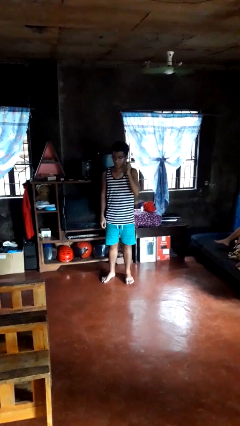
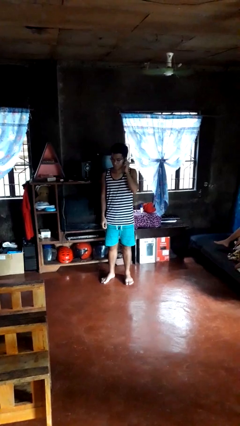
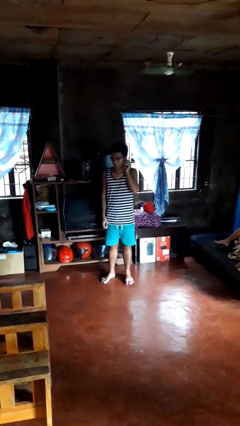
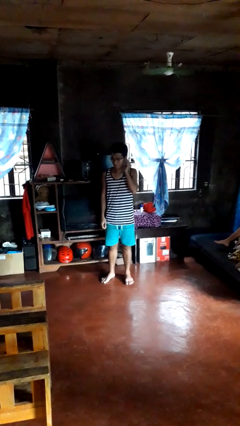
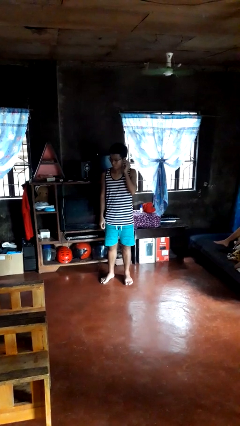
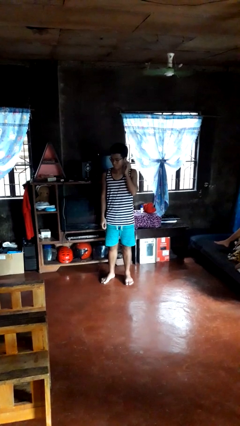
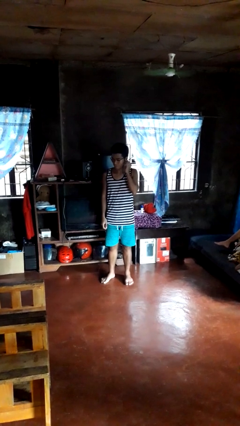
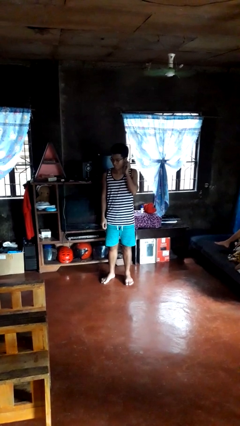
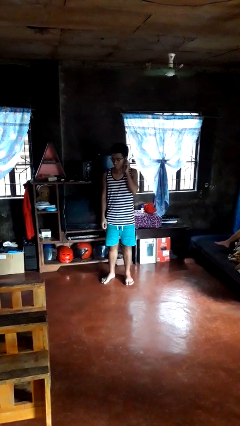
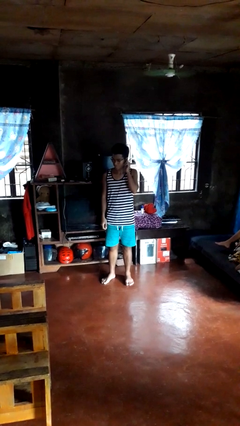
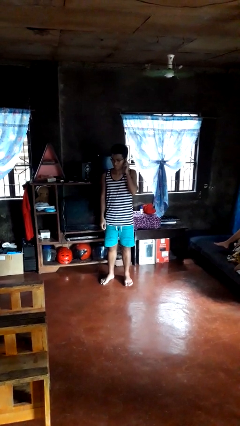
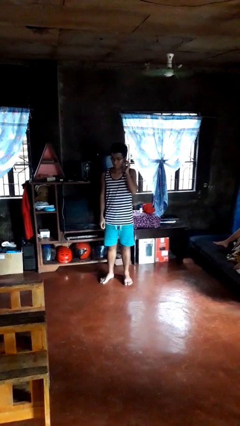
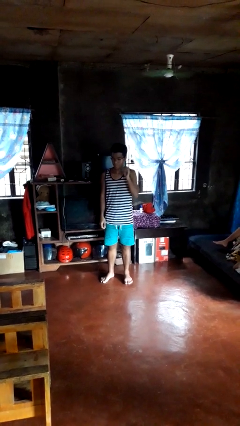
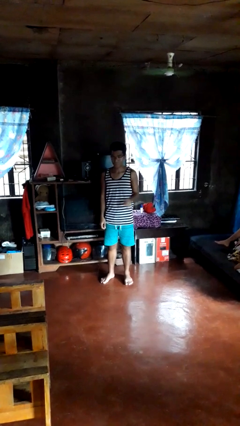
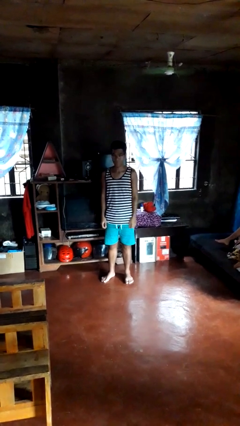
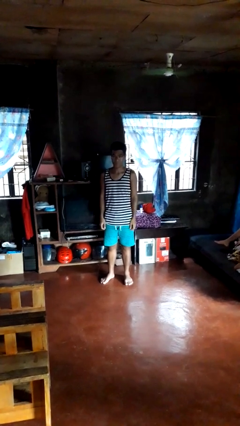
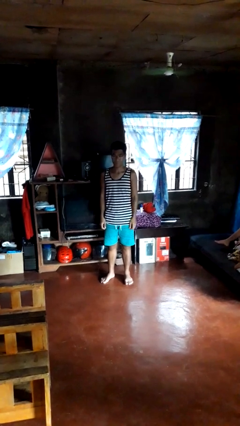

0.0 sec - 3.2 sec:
person touches earlobe

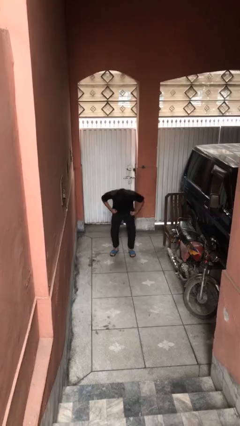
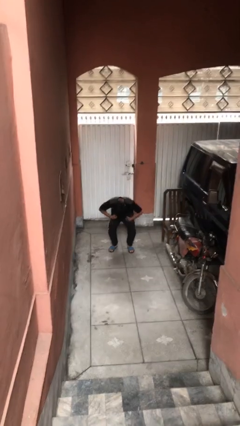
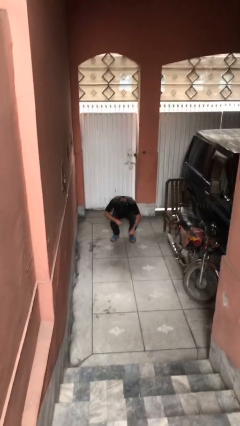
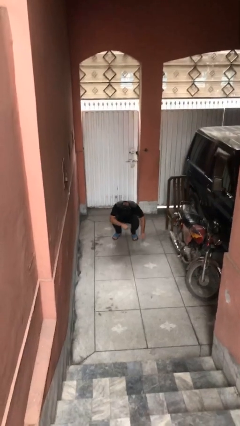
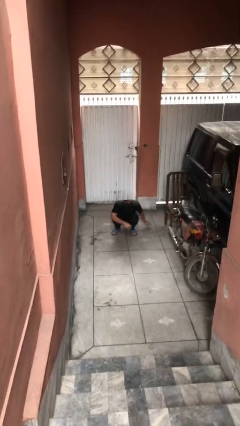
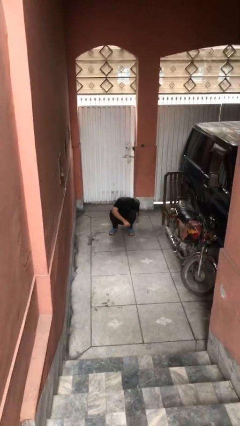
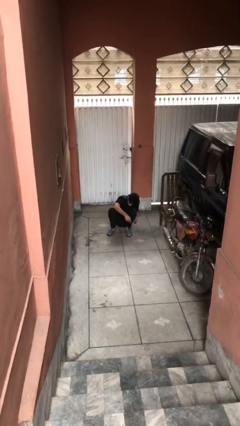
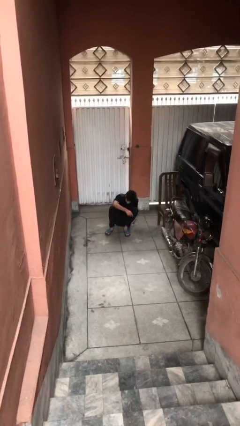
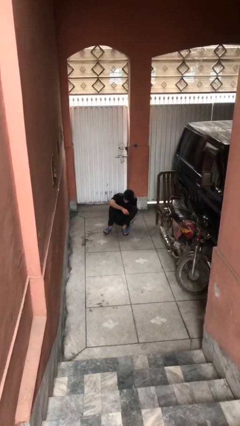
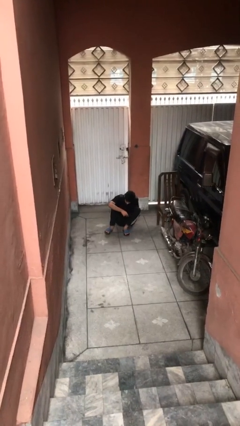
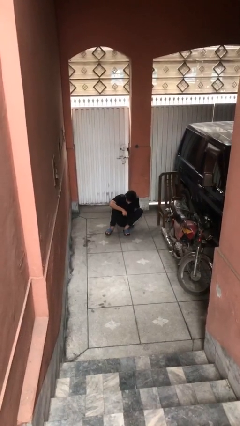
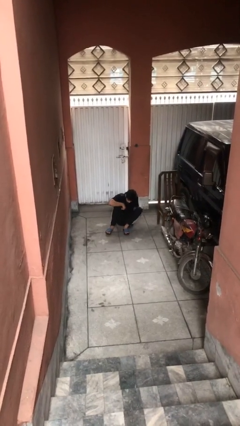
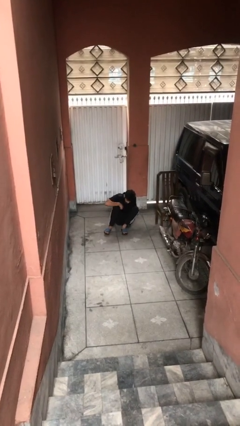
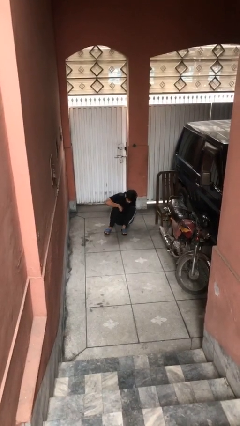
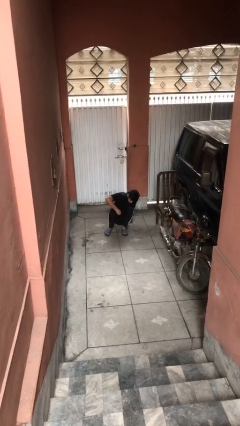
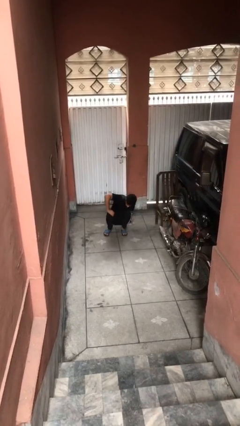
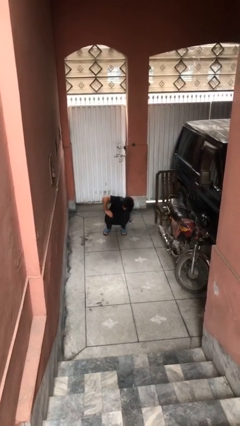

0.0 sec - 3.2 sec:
person sits down

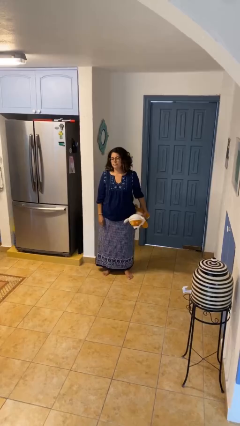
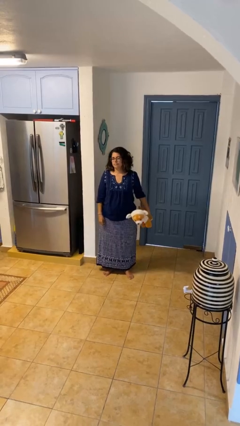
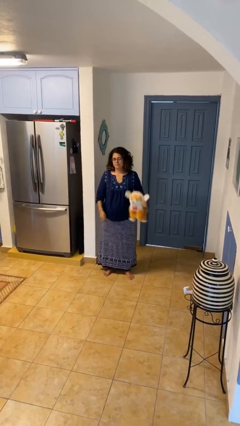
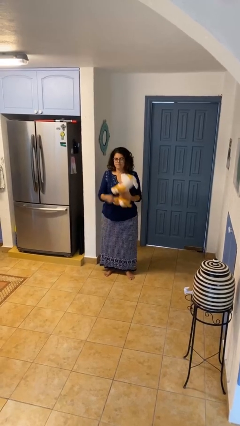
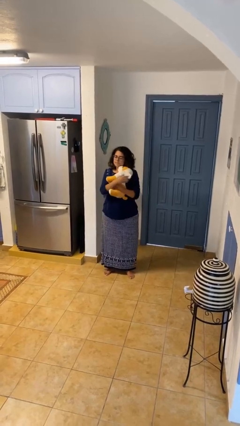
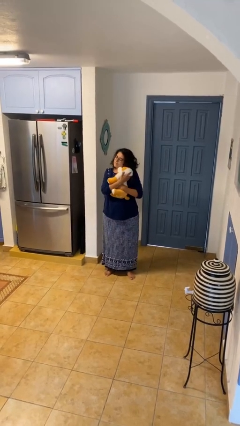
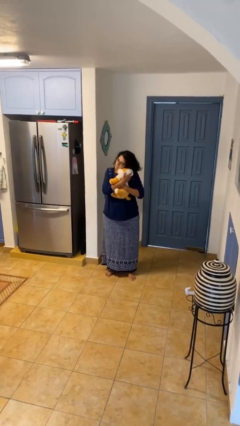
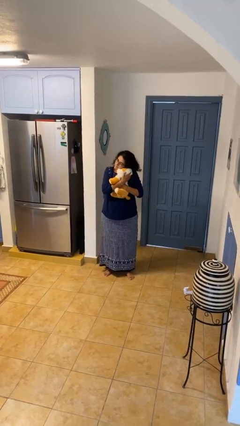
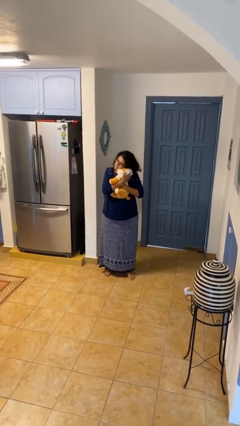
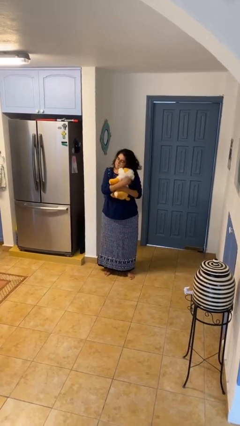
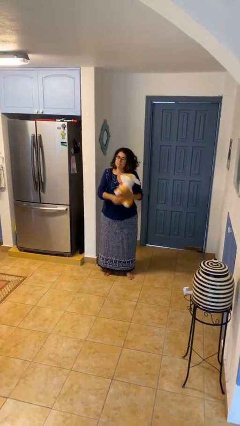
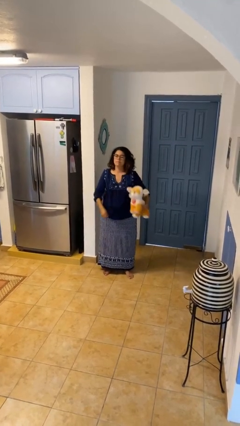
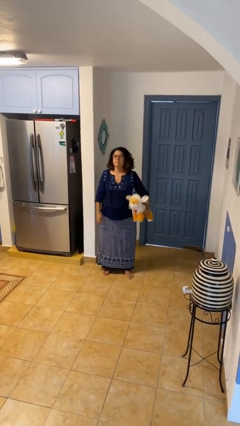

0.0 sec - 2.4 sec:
person hugs stuffed animal

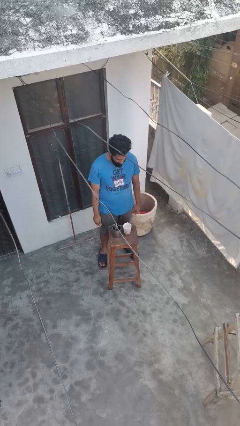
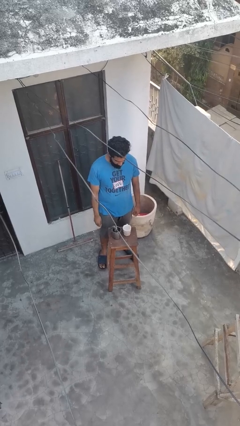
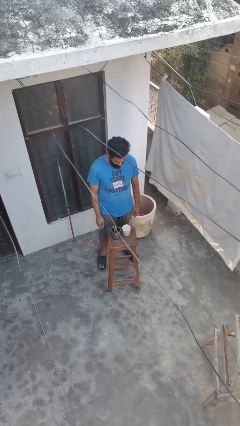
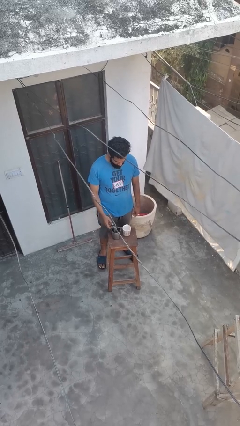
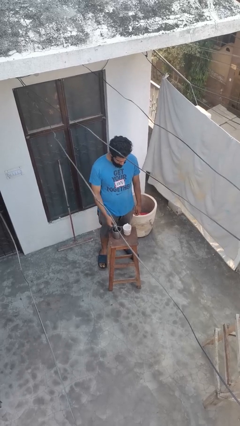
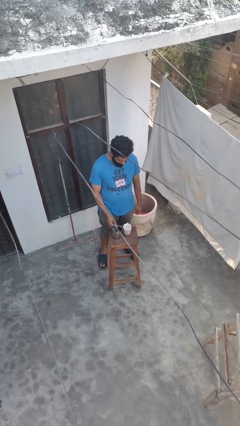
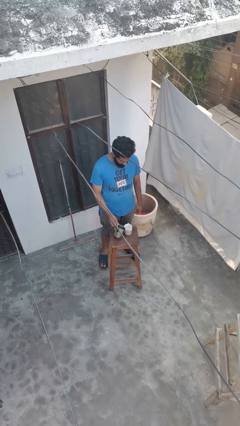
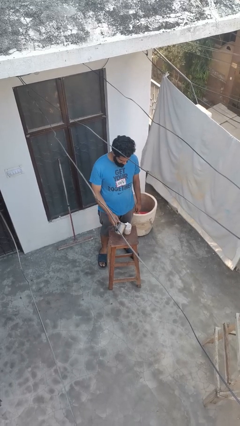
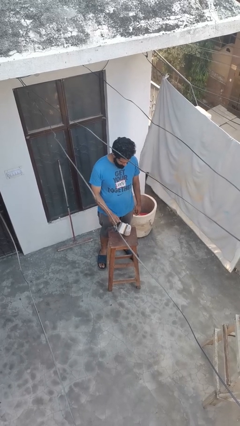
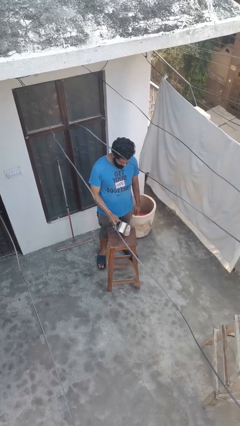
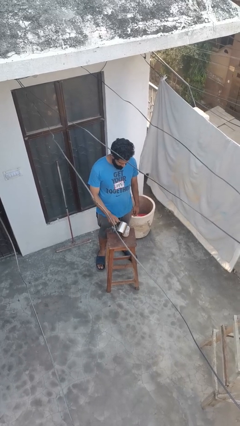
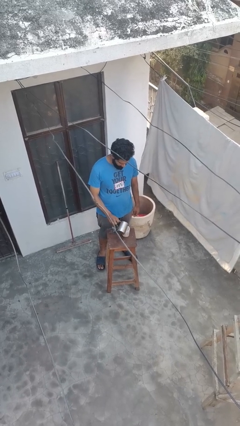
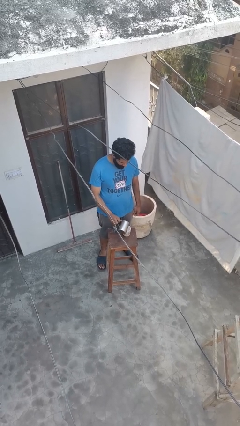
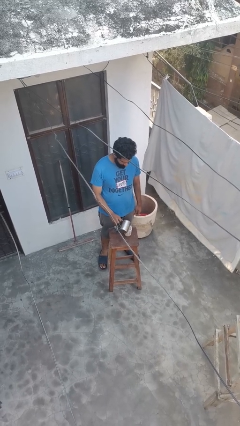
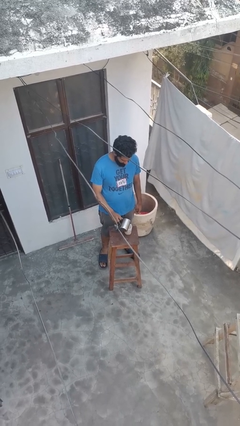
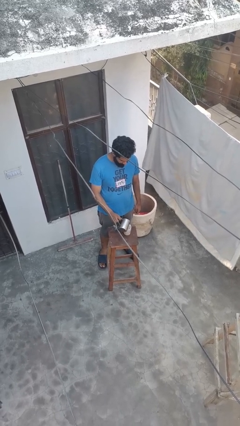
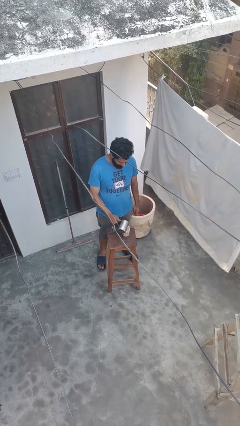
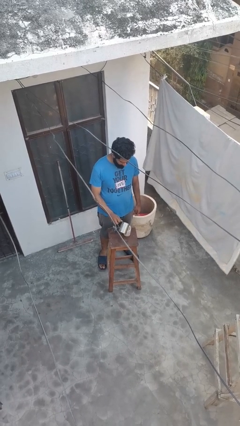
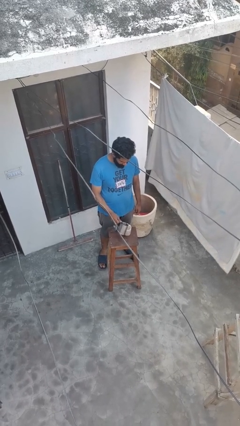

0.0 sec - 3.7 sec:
person pours coffee into mug

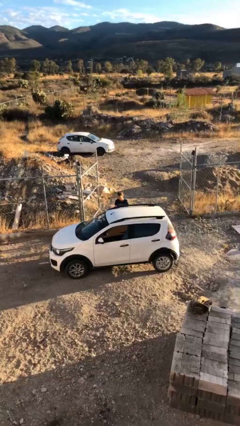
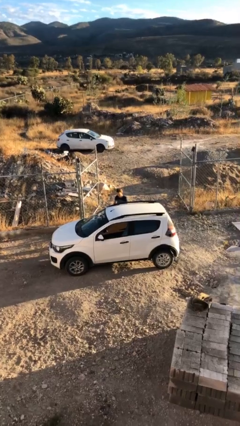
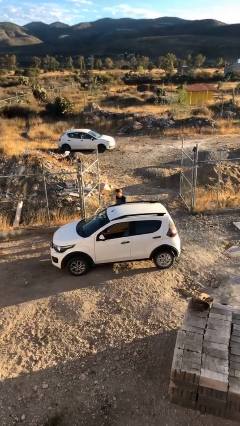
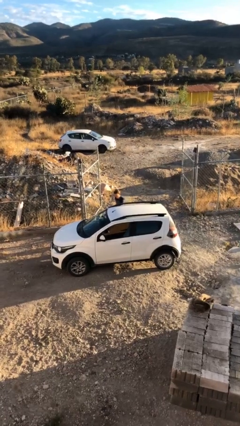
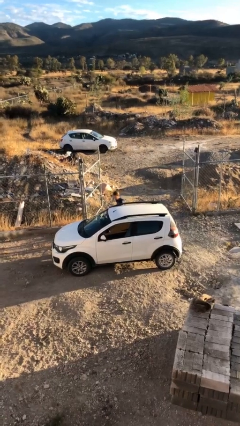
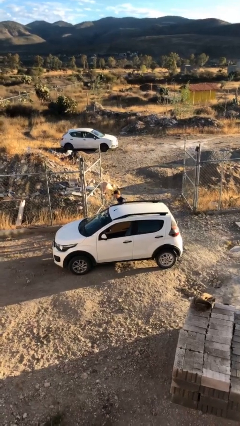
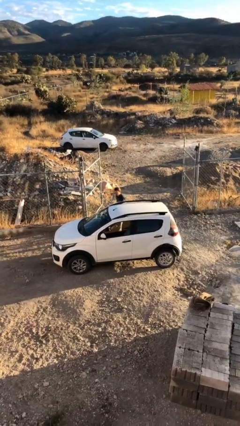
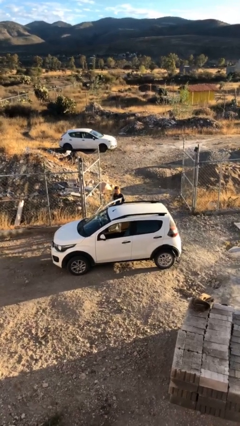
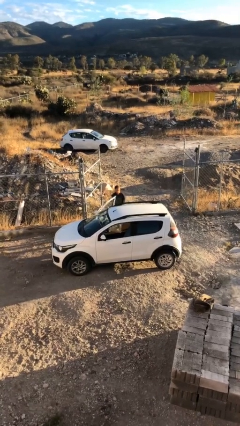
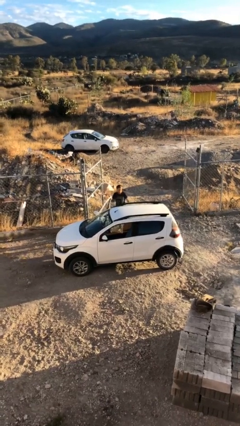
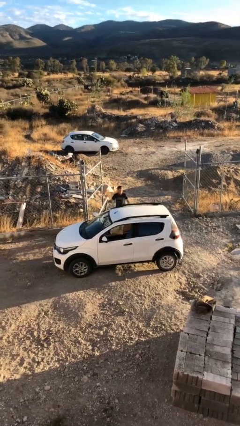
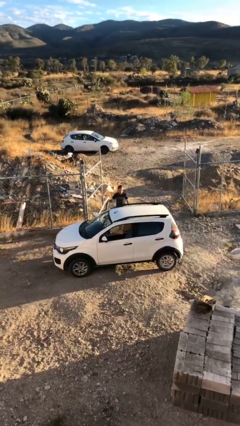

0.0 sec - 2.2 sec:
person opens car door

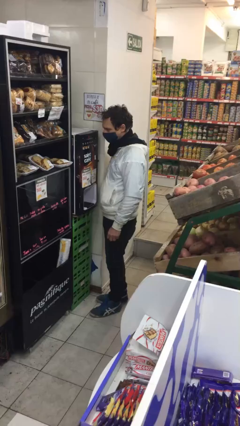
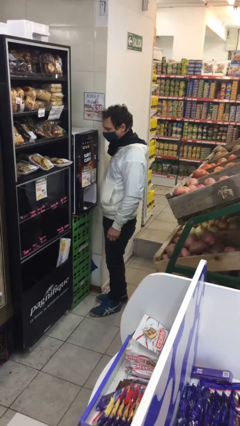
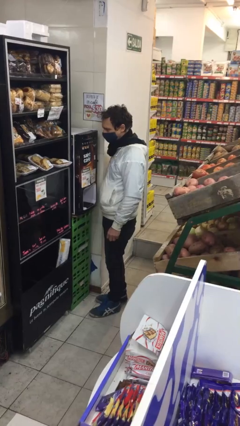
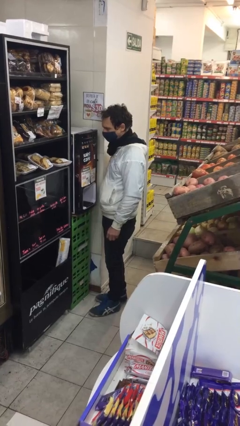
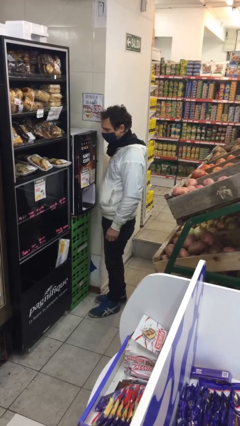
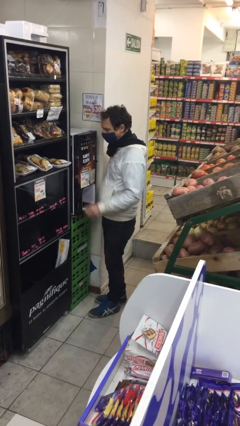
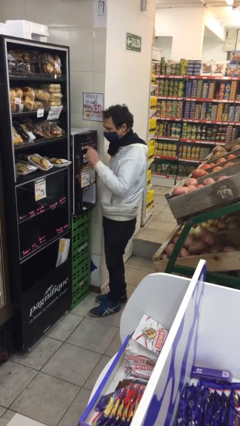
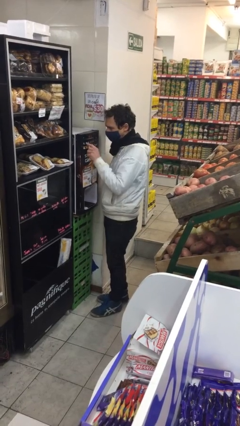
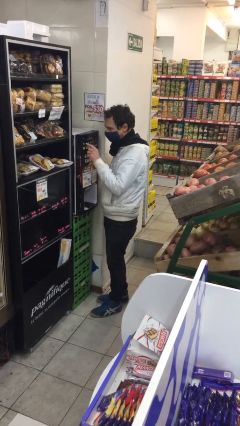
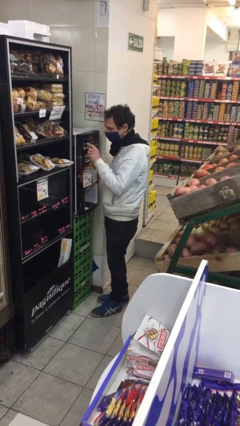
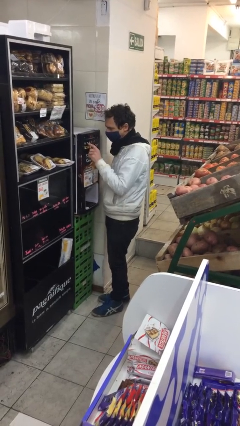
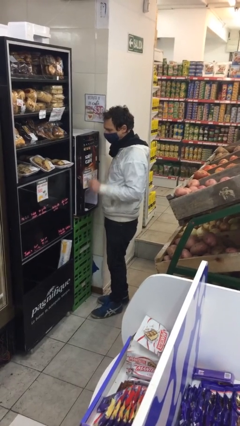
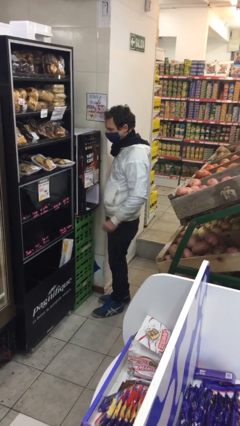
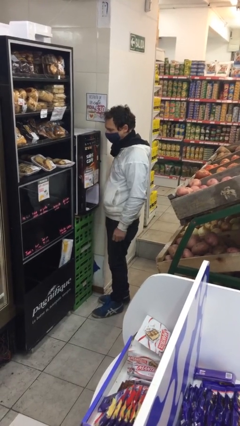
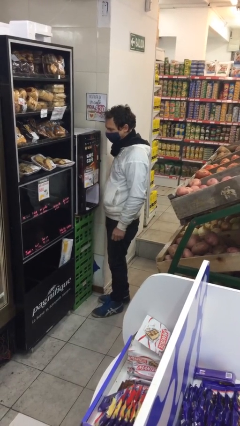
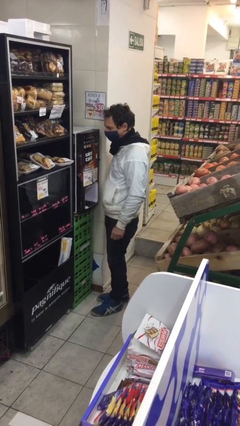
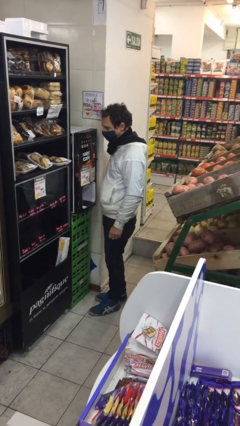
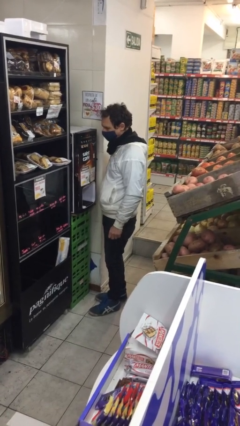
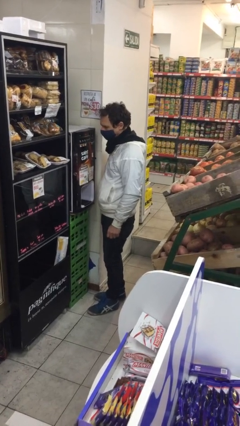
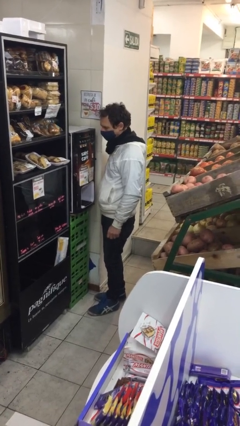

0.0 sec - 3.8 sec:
person purchases from machine
